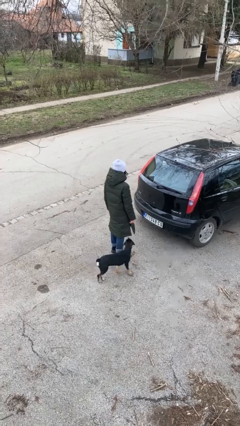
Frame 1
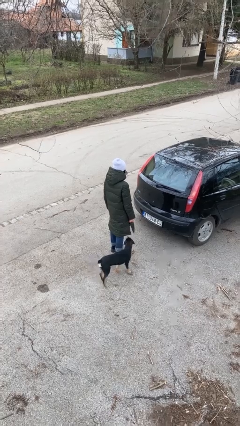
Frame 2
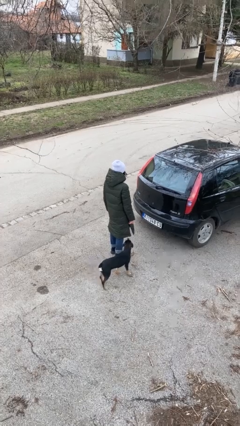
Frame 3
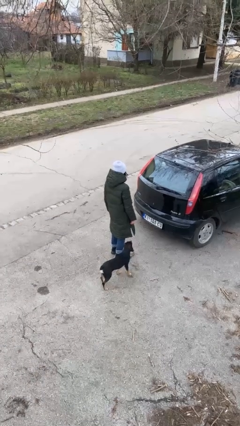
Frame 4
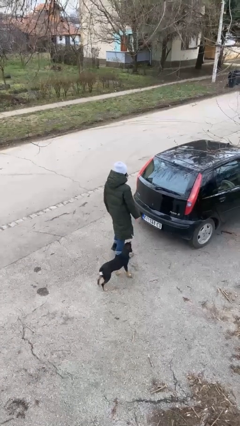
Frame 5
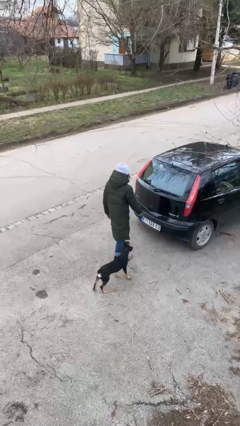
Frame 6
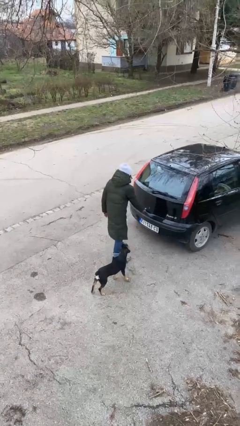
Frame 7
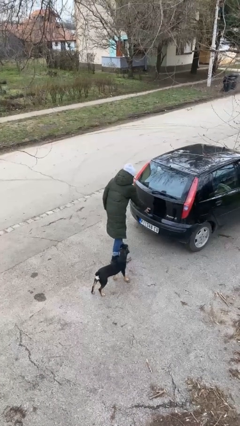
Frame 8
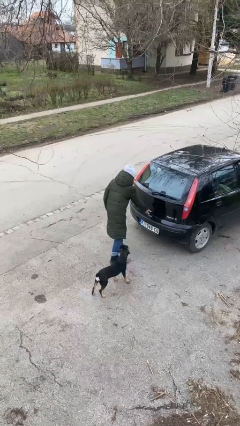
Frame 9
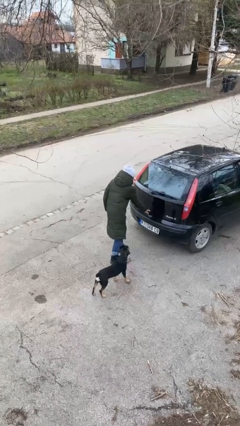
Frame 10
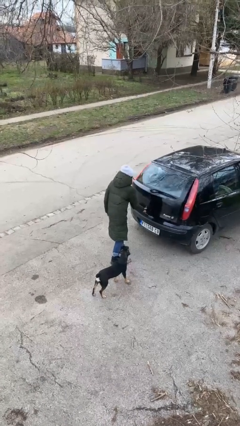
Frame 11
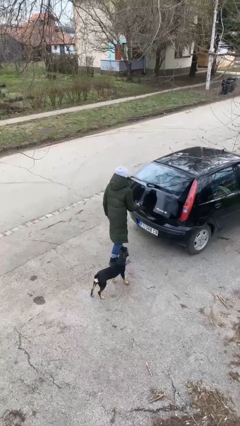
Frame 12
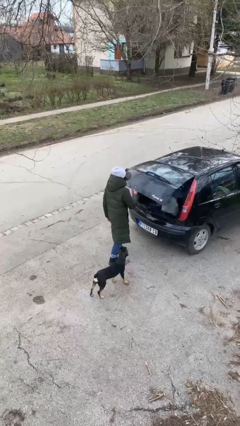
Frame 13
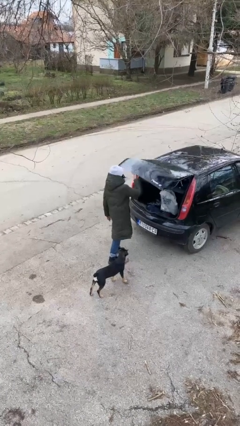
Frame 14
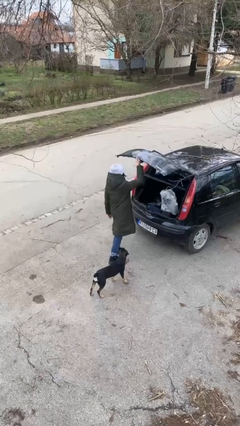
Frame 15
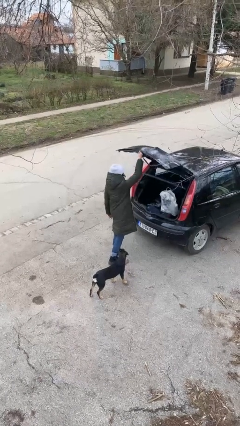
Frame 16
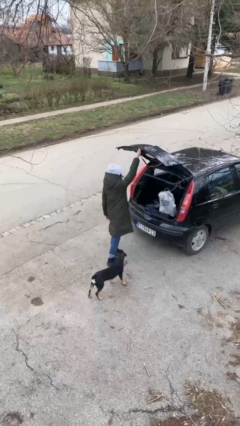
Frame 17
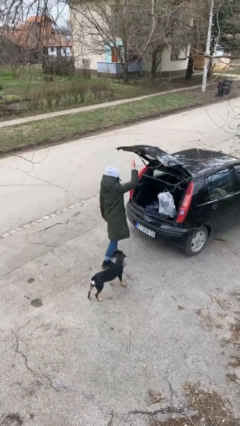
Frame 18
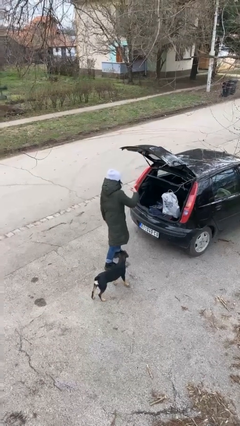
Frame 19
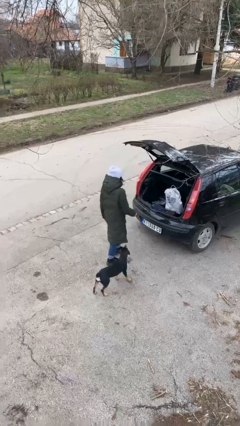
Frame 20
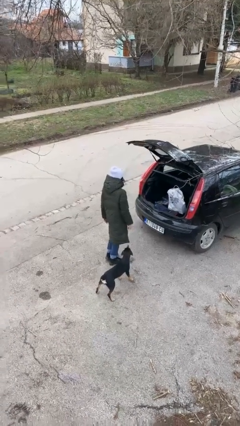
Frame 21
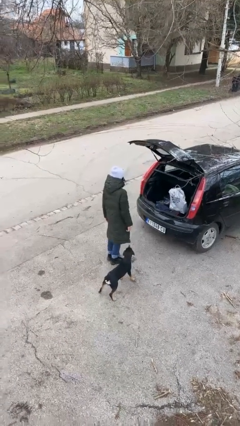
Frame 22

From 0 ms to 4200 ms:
person opens car trunk

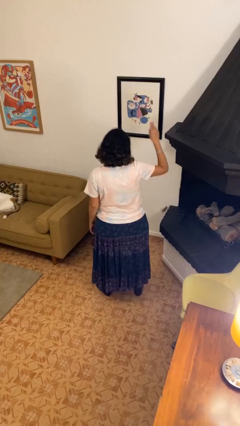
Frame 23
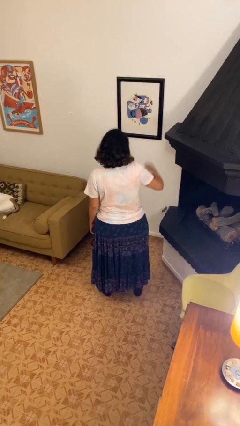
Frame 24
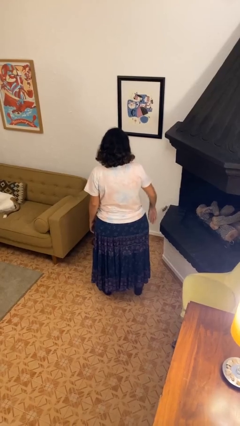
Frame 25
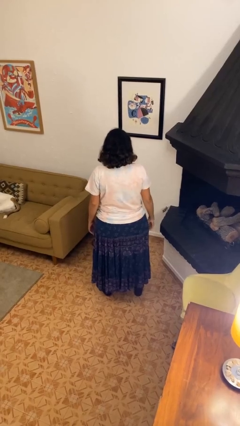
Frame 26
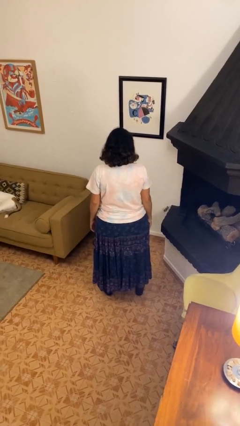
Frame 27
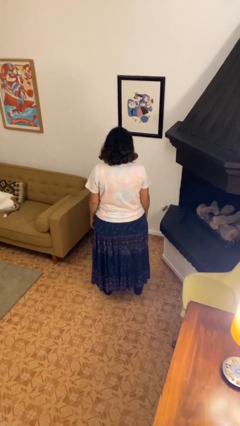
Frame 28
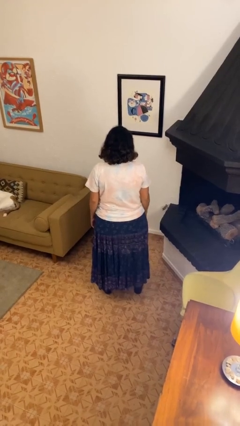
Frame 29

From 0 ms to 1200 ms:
person gestures lower hand

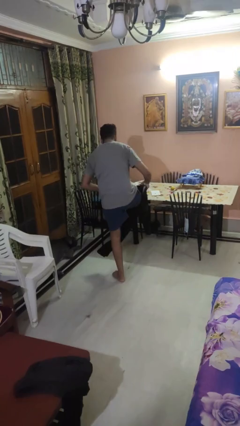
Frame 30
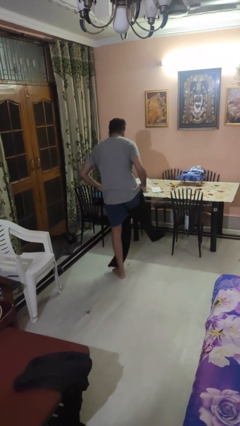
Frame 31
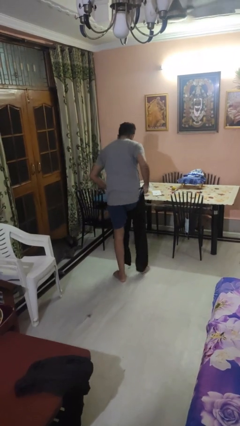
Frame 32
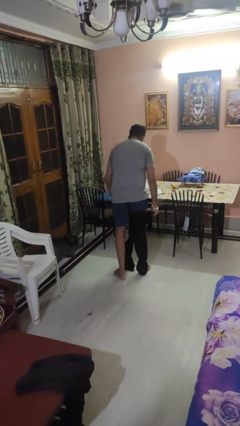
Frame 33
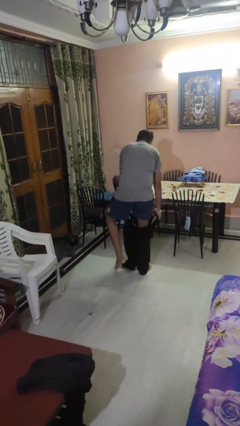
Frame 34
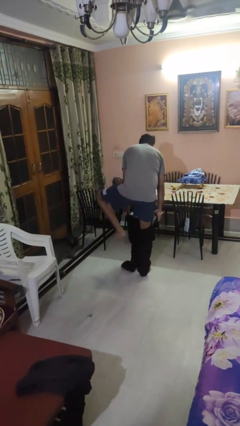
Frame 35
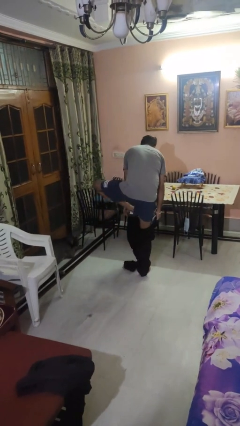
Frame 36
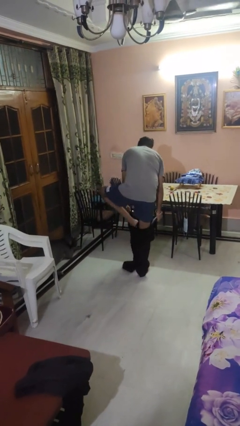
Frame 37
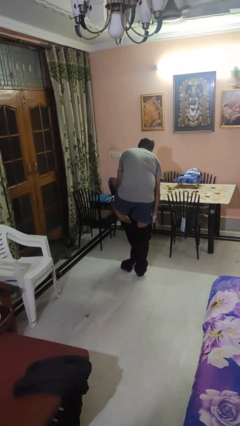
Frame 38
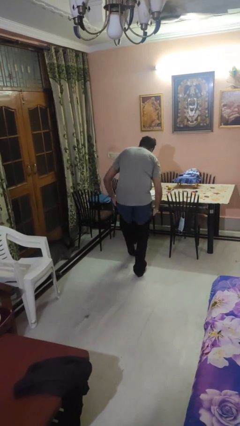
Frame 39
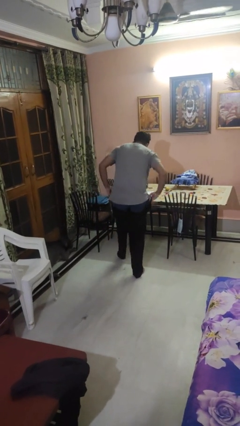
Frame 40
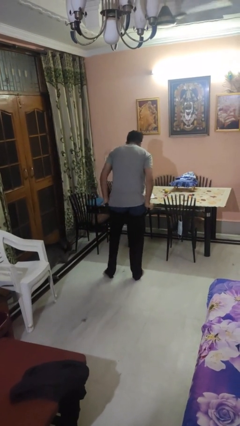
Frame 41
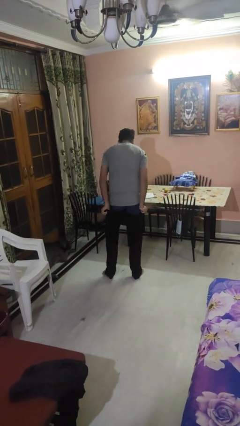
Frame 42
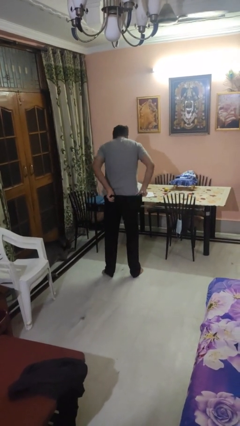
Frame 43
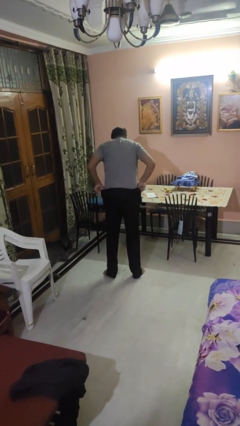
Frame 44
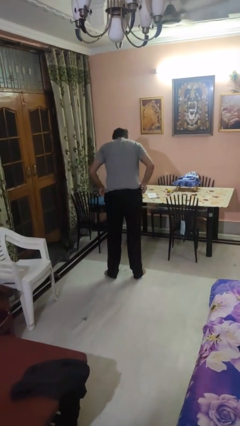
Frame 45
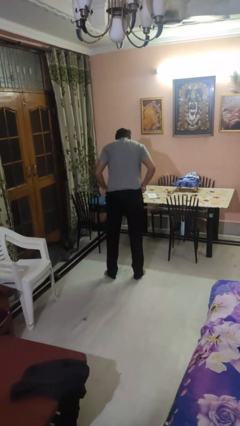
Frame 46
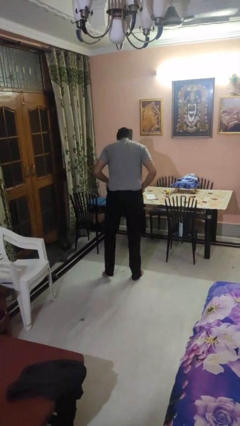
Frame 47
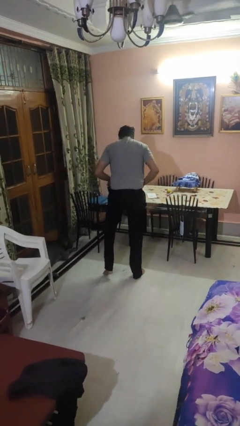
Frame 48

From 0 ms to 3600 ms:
person puts on pants

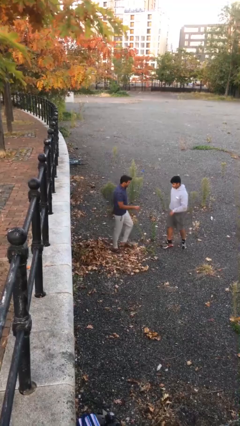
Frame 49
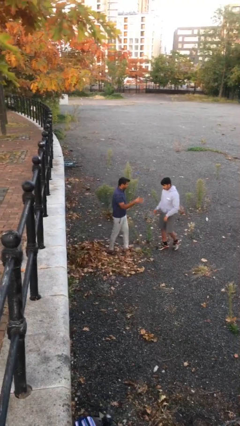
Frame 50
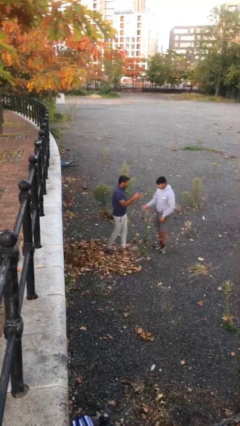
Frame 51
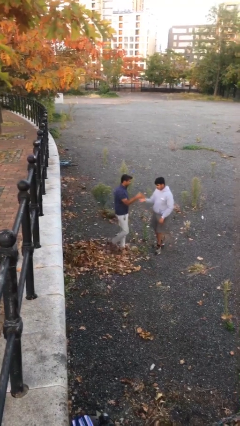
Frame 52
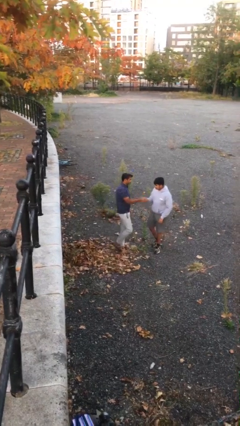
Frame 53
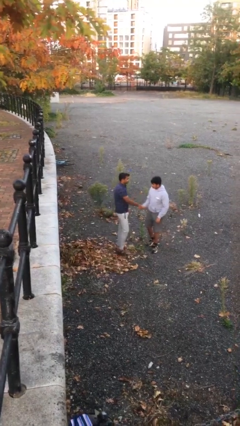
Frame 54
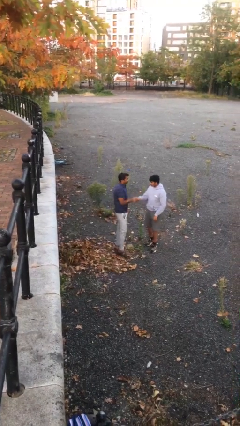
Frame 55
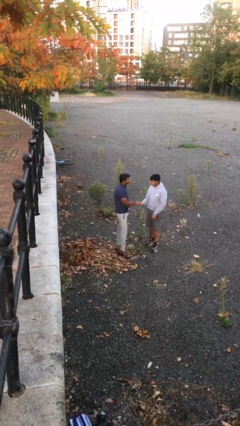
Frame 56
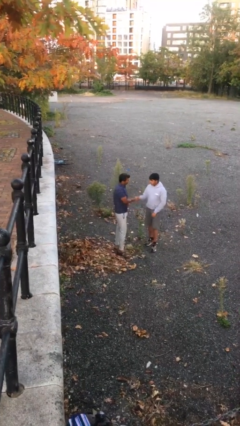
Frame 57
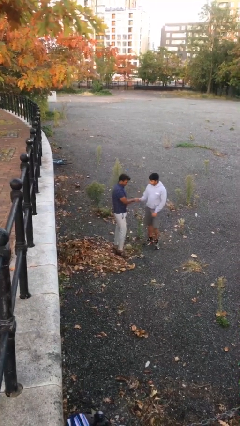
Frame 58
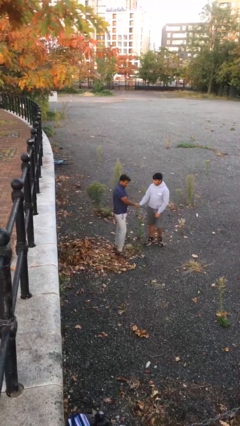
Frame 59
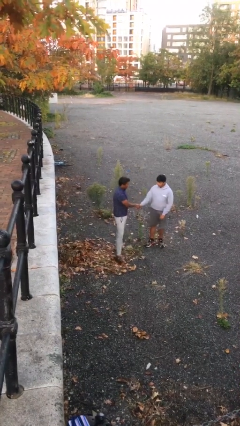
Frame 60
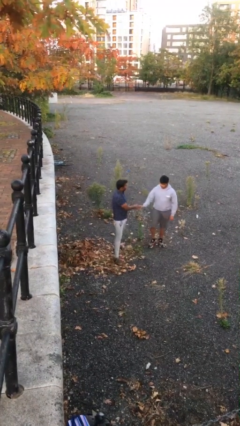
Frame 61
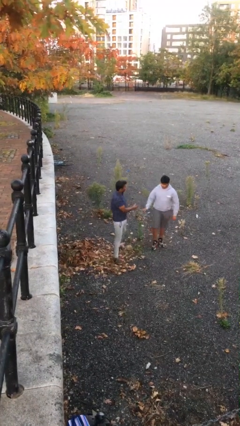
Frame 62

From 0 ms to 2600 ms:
person shakes hand

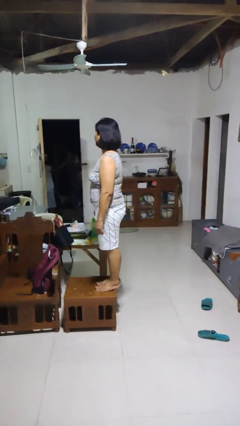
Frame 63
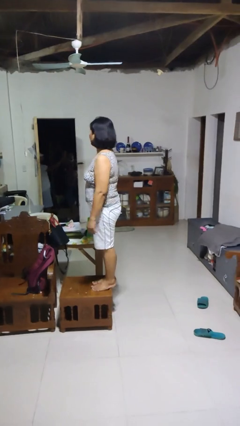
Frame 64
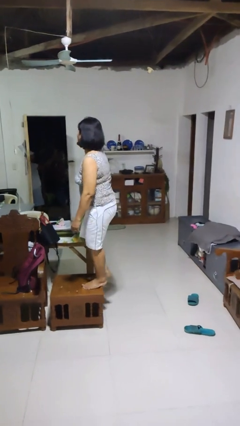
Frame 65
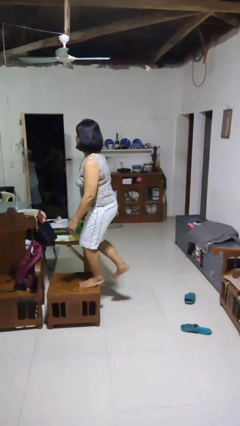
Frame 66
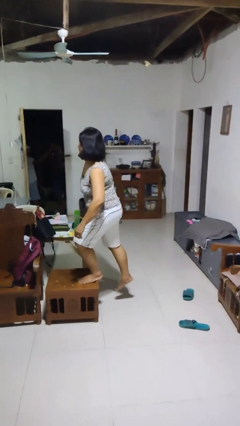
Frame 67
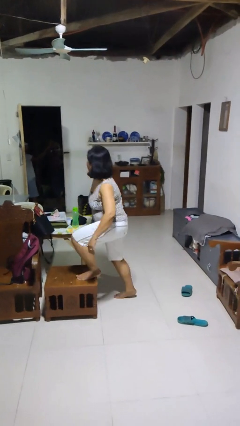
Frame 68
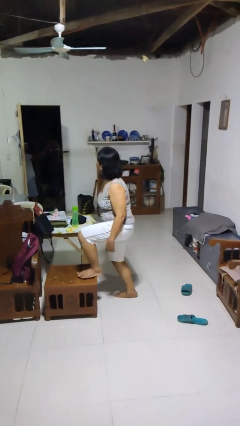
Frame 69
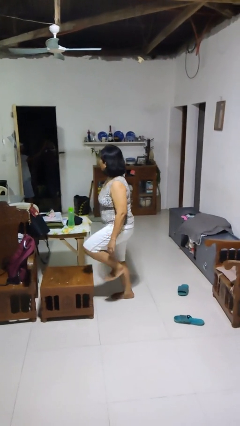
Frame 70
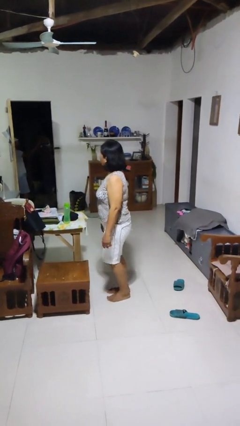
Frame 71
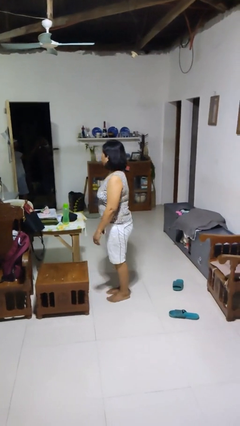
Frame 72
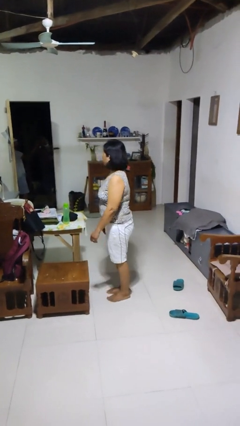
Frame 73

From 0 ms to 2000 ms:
person climbs off chair

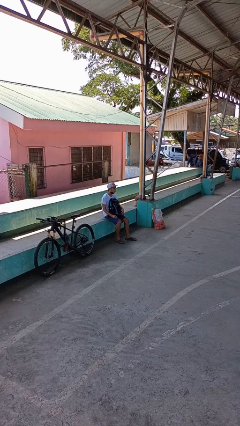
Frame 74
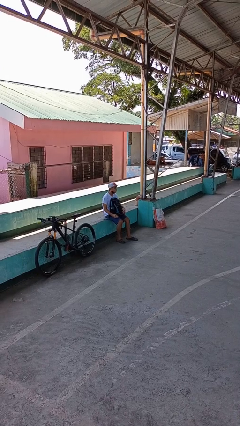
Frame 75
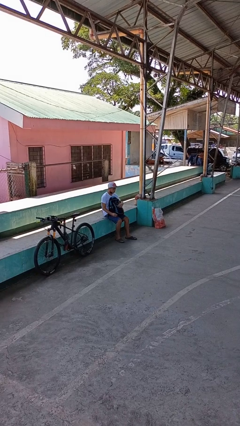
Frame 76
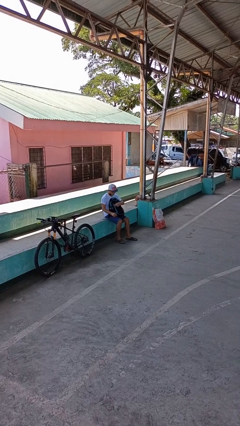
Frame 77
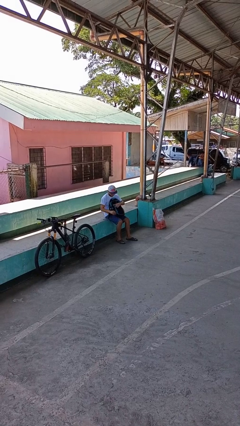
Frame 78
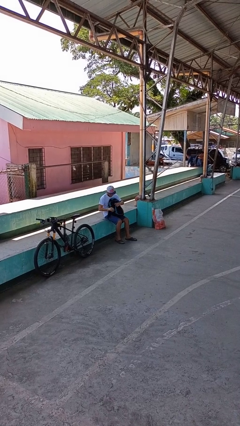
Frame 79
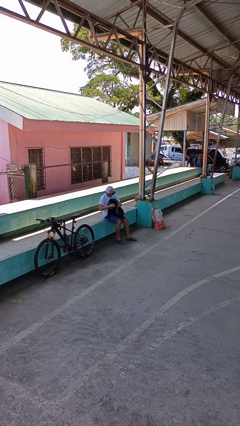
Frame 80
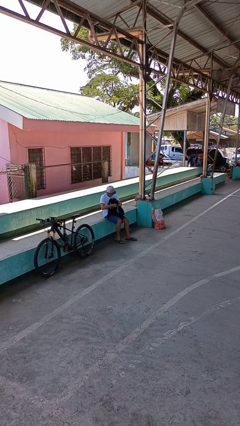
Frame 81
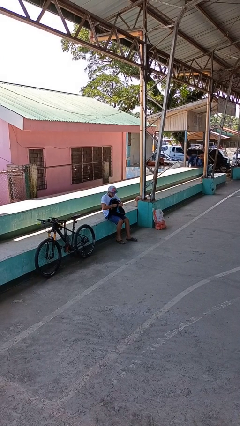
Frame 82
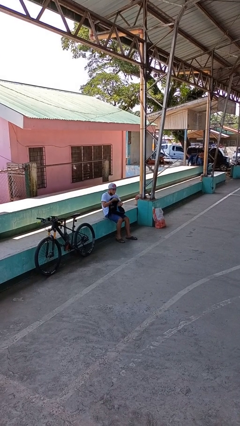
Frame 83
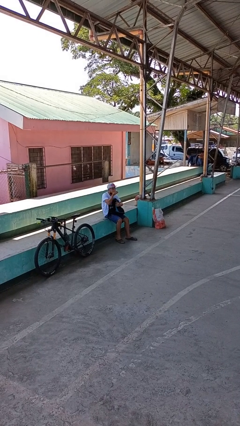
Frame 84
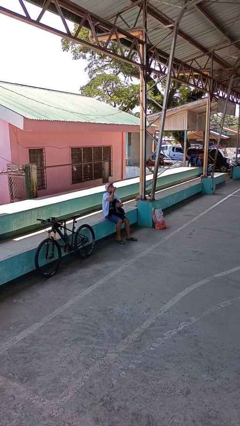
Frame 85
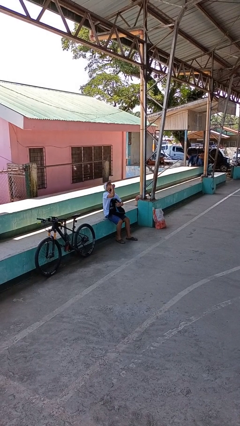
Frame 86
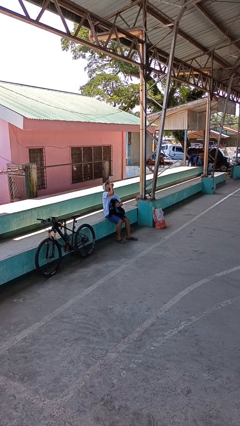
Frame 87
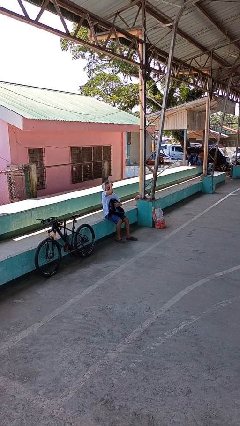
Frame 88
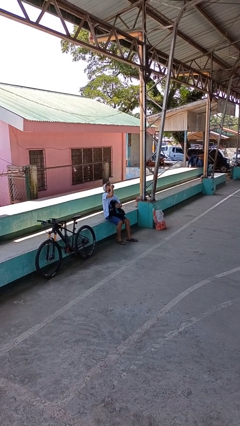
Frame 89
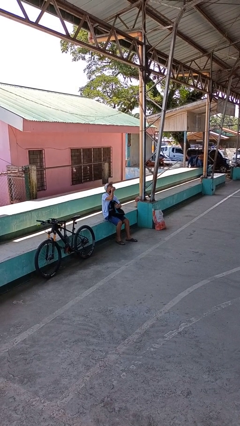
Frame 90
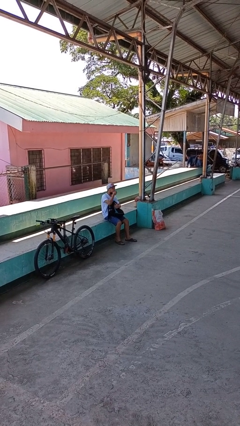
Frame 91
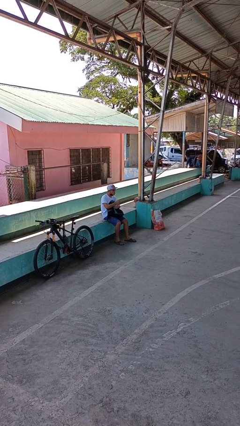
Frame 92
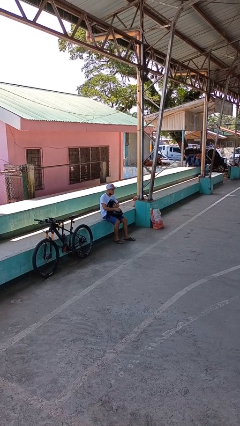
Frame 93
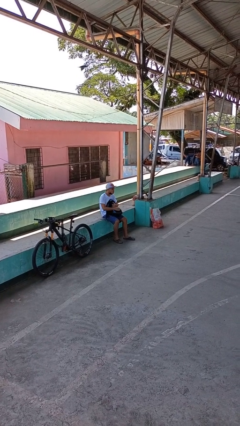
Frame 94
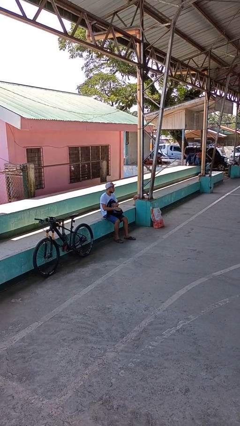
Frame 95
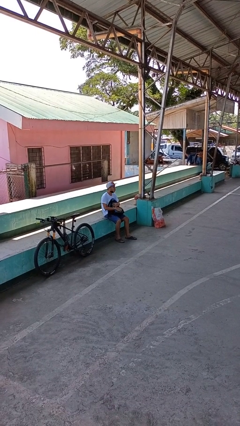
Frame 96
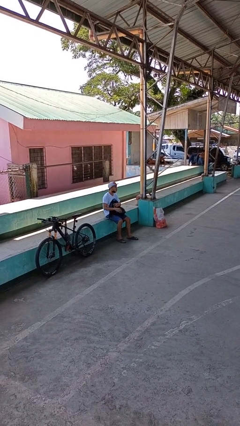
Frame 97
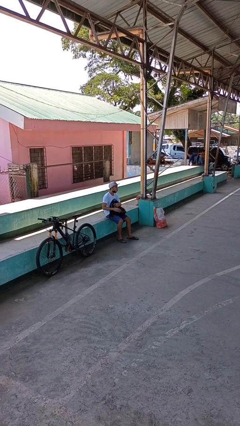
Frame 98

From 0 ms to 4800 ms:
person eats snack from bag
